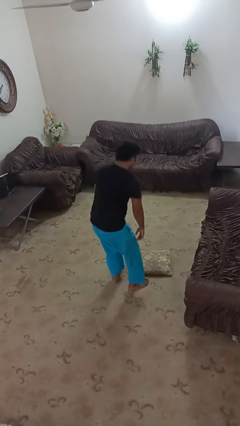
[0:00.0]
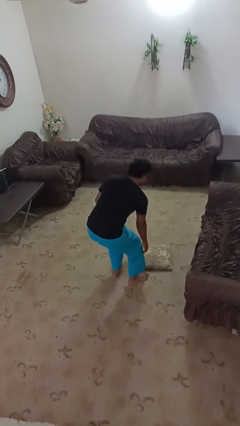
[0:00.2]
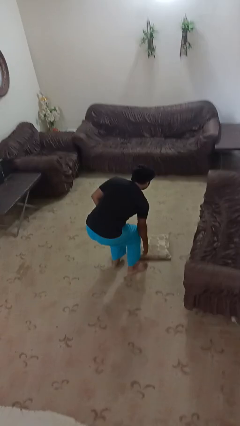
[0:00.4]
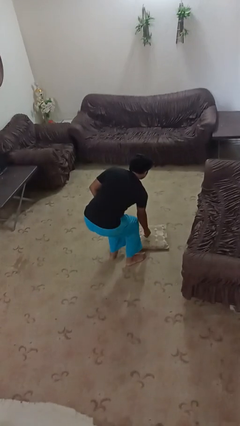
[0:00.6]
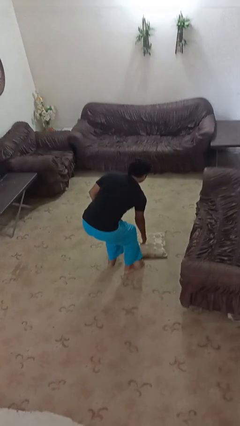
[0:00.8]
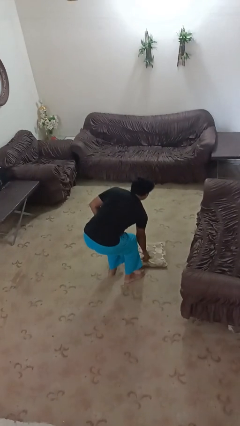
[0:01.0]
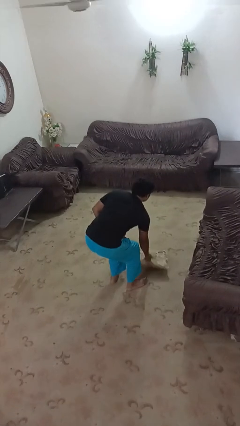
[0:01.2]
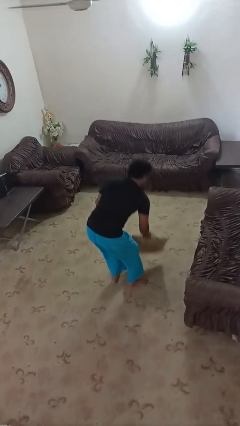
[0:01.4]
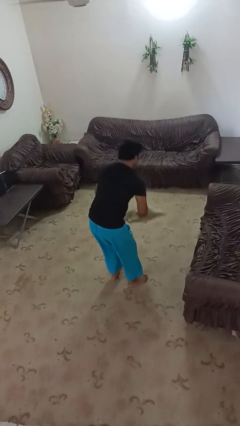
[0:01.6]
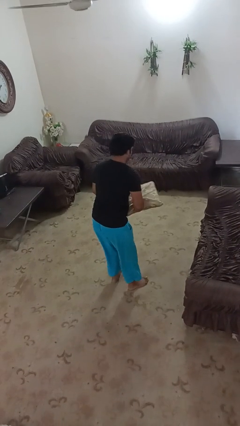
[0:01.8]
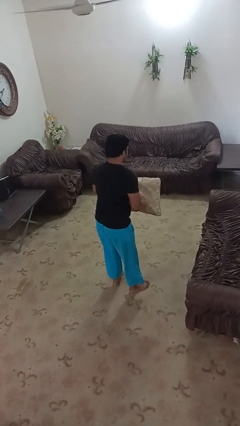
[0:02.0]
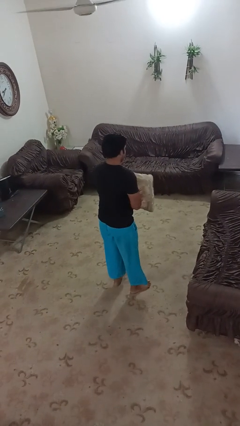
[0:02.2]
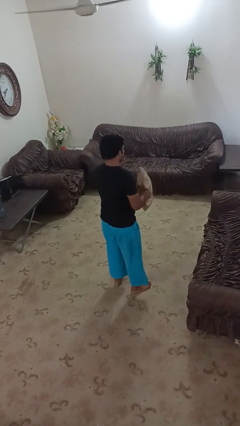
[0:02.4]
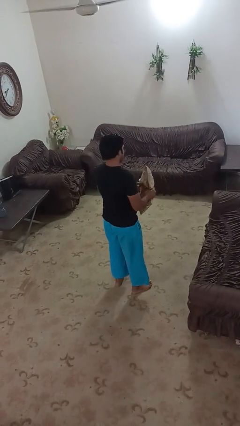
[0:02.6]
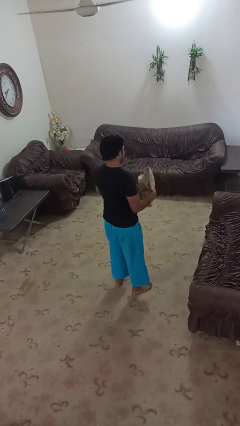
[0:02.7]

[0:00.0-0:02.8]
person picks up object from floor

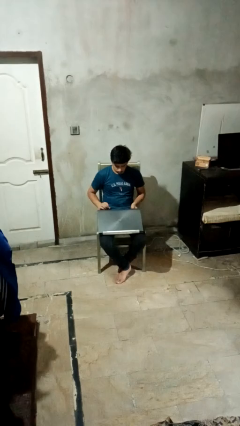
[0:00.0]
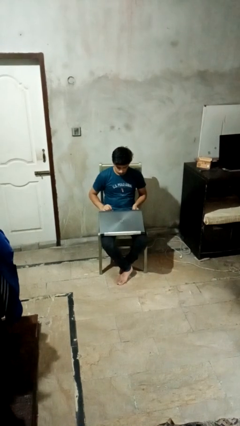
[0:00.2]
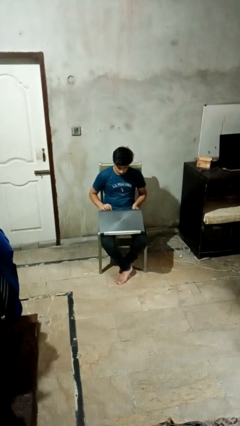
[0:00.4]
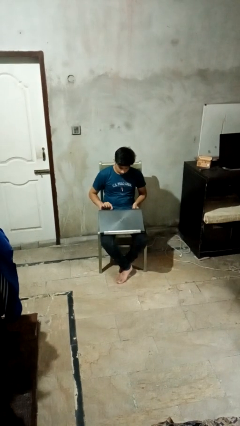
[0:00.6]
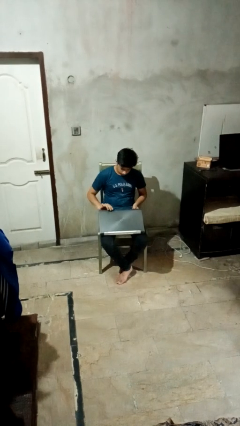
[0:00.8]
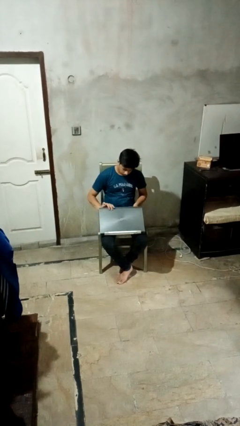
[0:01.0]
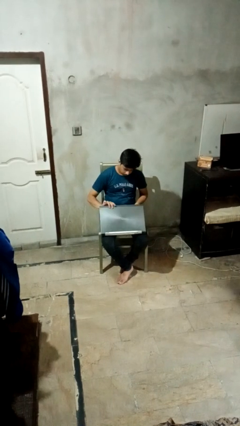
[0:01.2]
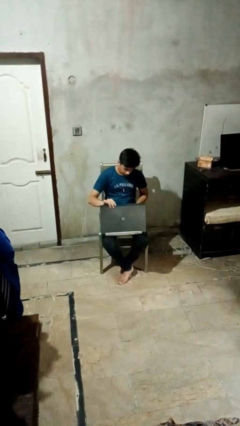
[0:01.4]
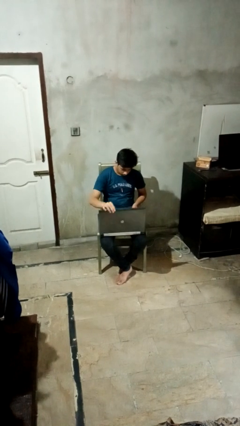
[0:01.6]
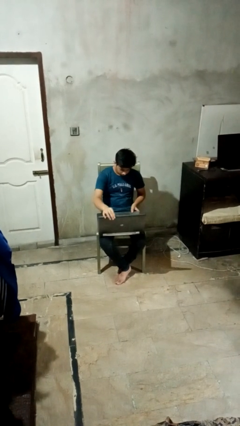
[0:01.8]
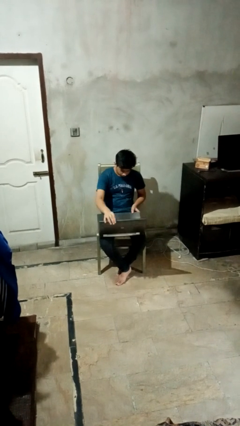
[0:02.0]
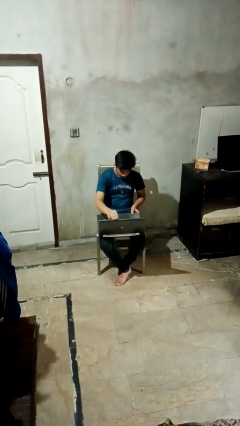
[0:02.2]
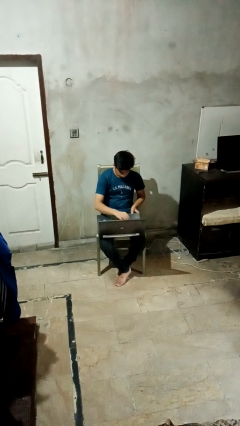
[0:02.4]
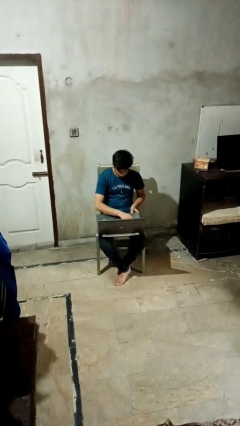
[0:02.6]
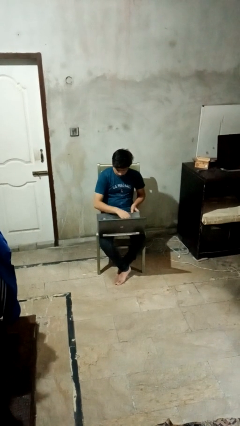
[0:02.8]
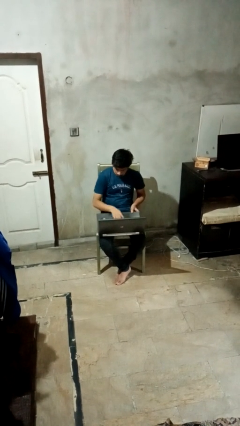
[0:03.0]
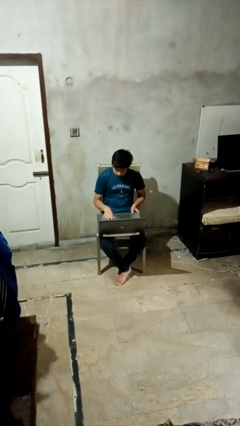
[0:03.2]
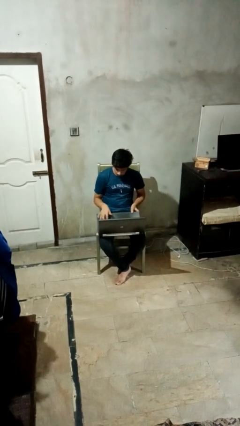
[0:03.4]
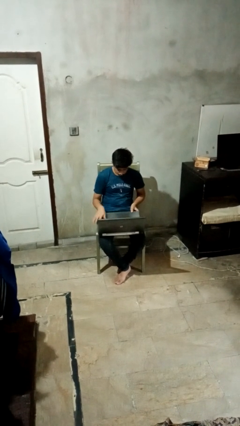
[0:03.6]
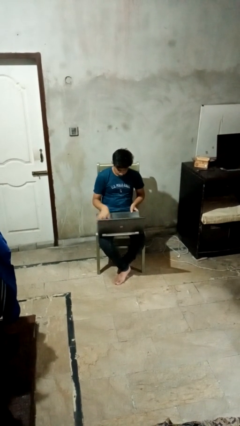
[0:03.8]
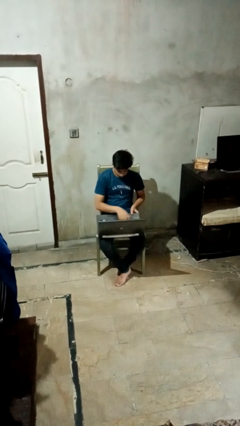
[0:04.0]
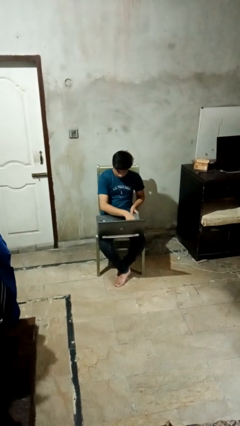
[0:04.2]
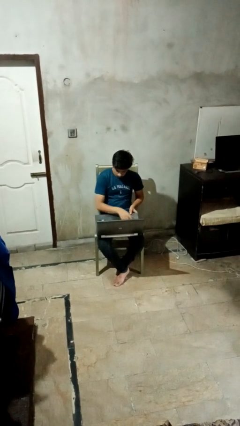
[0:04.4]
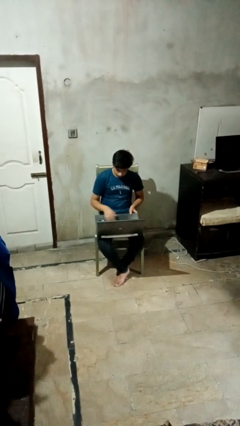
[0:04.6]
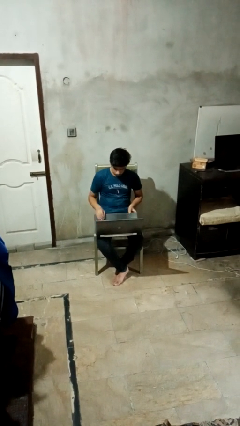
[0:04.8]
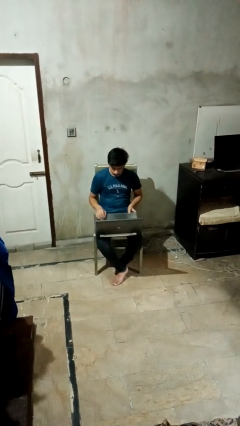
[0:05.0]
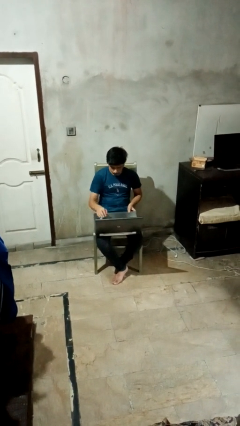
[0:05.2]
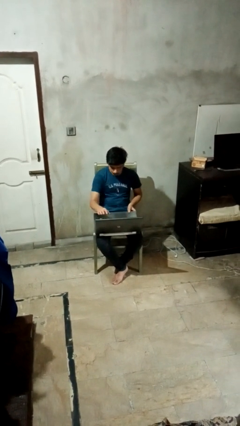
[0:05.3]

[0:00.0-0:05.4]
person opens laptop

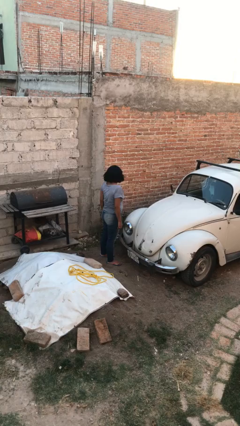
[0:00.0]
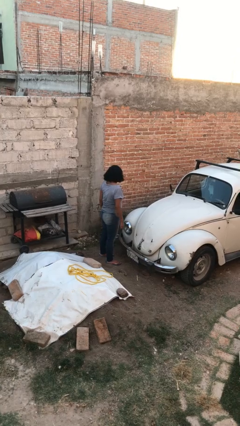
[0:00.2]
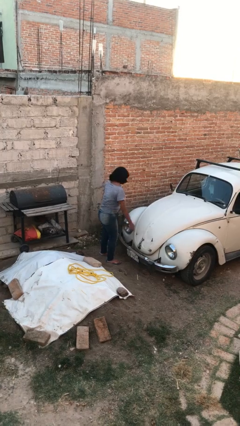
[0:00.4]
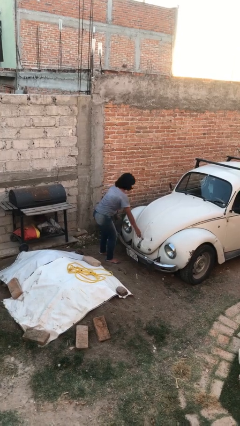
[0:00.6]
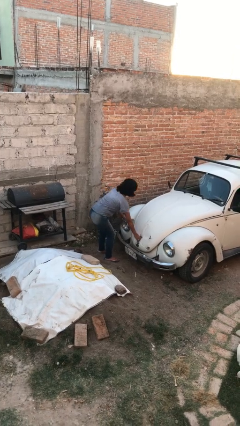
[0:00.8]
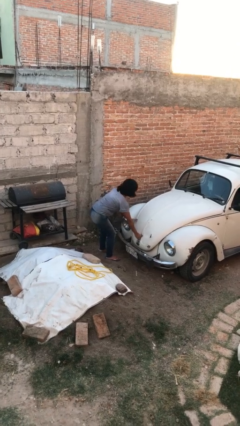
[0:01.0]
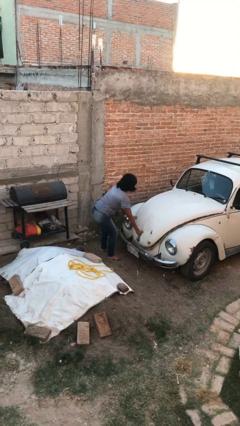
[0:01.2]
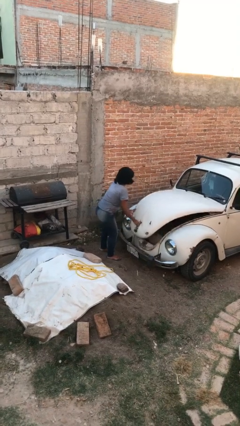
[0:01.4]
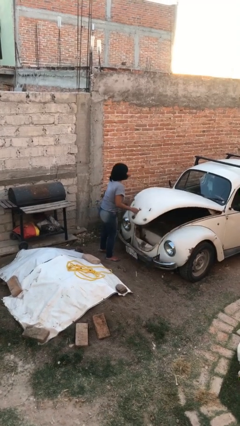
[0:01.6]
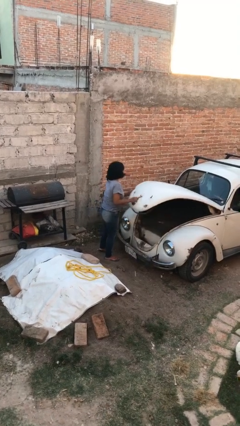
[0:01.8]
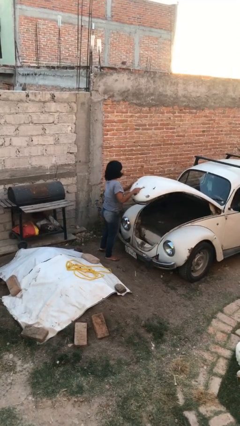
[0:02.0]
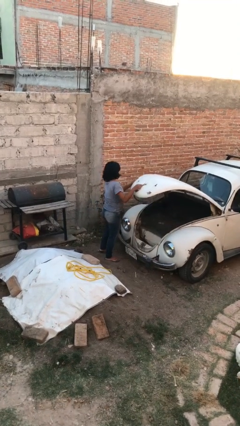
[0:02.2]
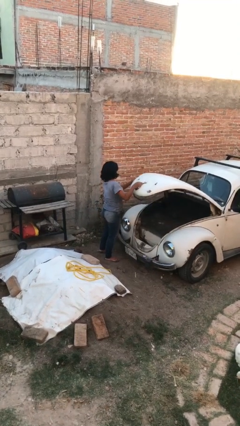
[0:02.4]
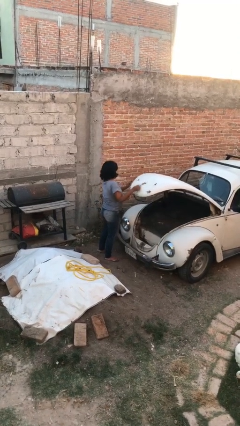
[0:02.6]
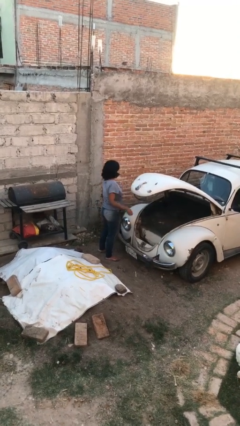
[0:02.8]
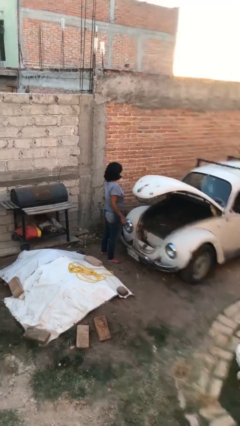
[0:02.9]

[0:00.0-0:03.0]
person opens car trunk

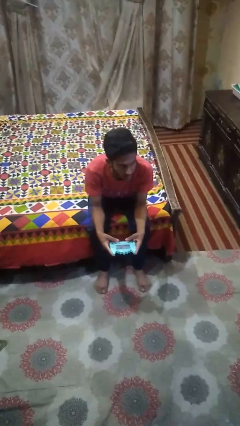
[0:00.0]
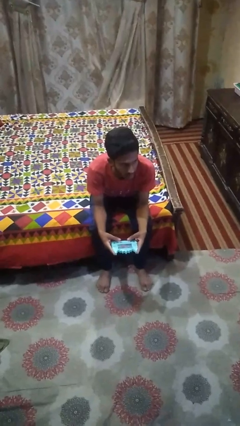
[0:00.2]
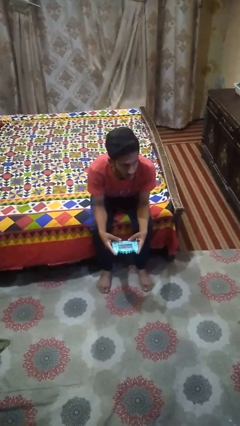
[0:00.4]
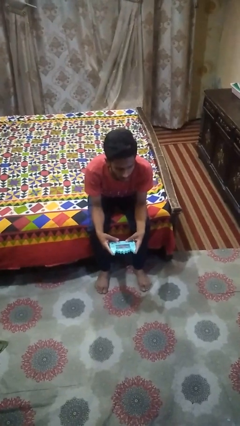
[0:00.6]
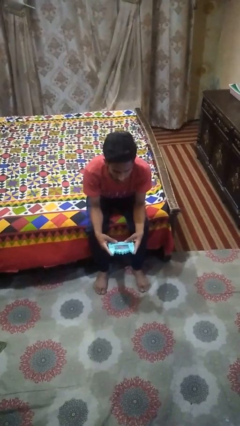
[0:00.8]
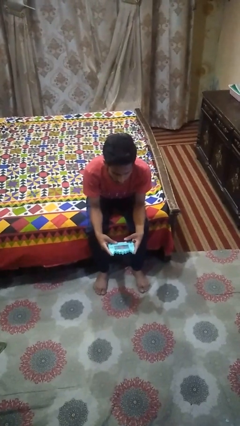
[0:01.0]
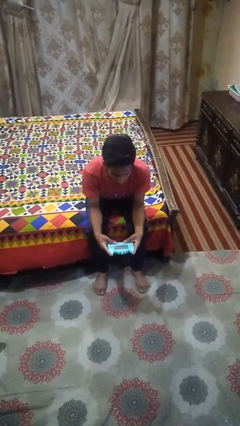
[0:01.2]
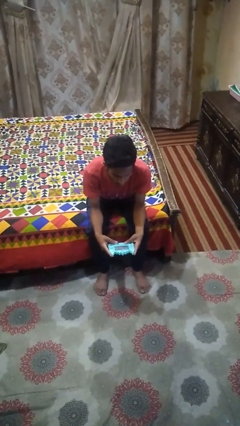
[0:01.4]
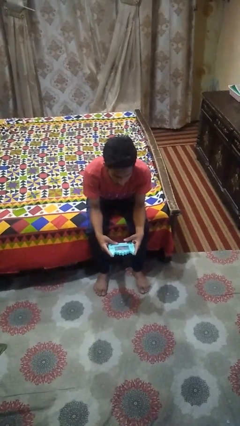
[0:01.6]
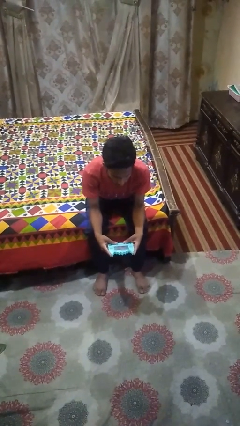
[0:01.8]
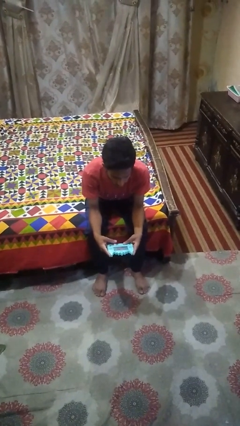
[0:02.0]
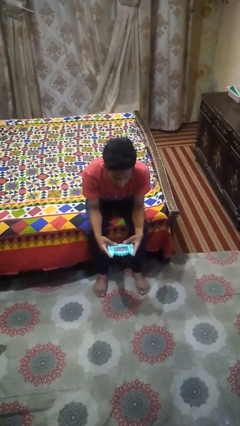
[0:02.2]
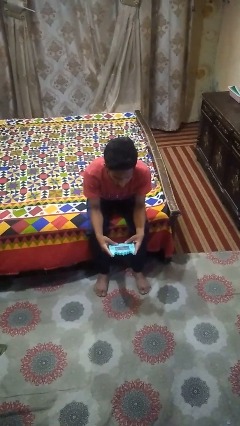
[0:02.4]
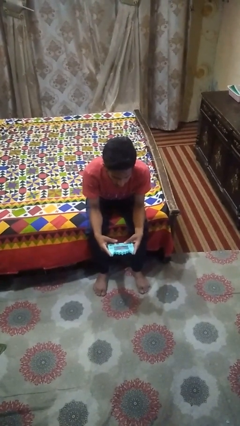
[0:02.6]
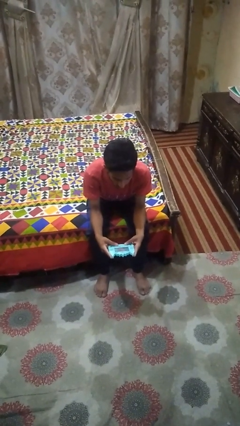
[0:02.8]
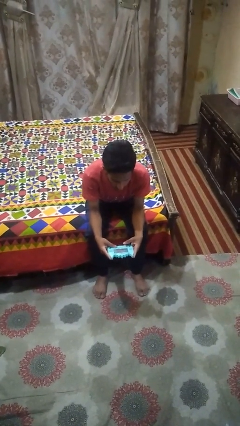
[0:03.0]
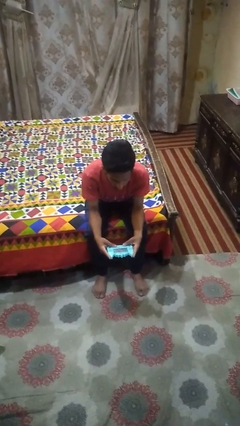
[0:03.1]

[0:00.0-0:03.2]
person interacts with handheld game

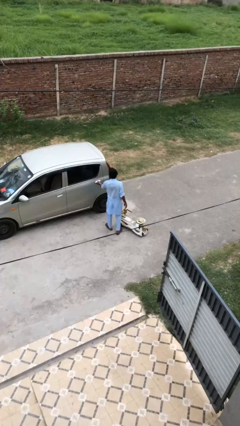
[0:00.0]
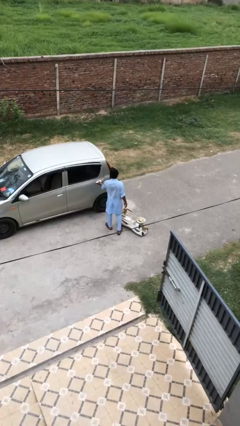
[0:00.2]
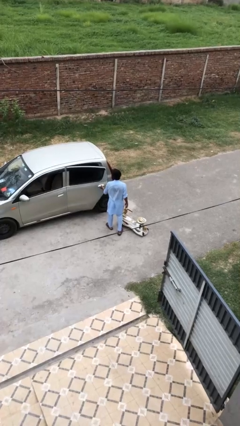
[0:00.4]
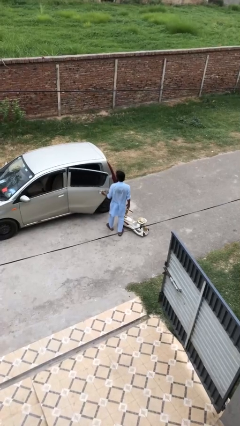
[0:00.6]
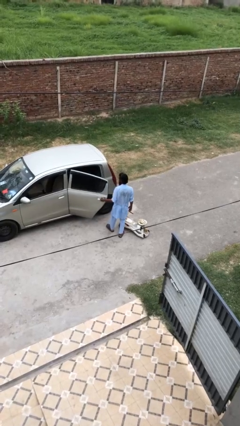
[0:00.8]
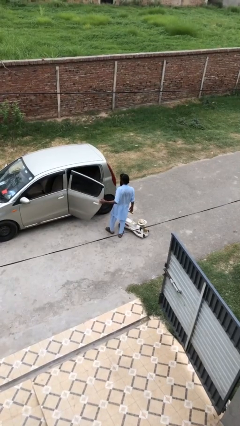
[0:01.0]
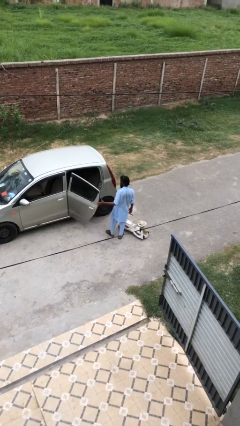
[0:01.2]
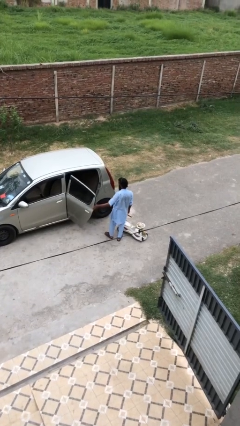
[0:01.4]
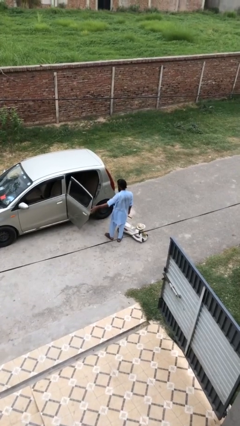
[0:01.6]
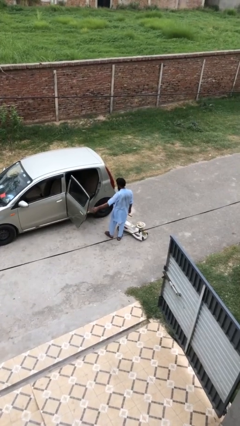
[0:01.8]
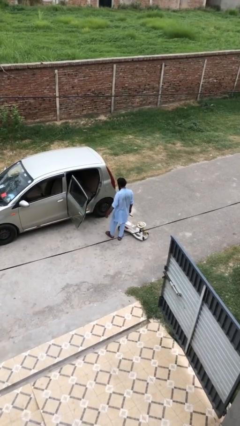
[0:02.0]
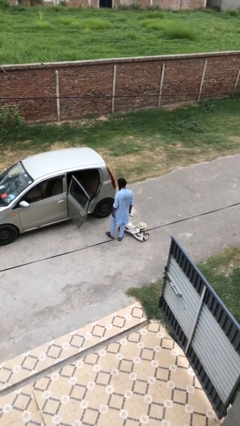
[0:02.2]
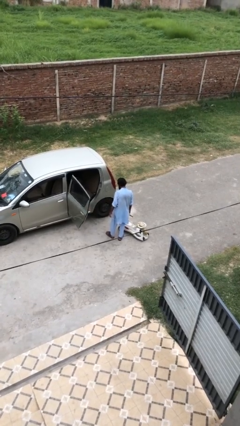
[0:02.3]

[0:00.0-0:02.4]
person opens car door

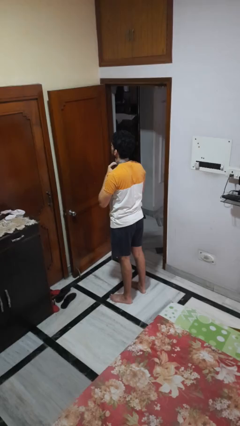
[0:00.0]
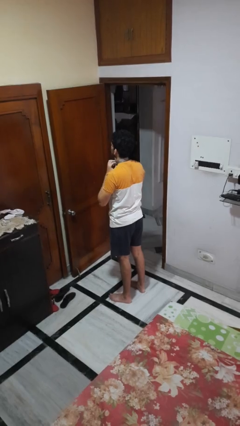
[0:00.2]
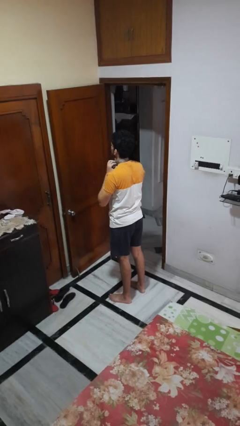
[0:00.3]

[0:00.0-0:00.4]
person takes off necktie

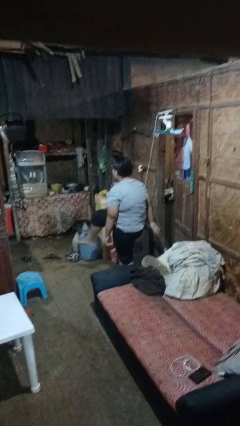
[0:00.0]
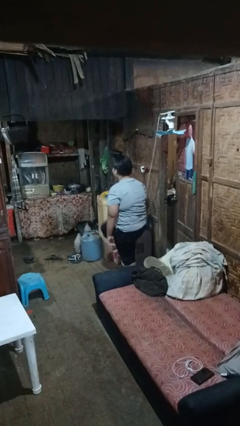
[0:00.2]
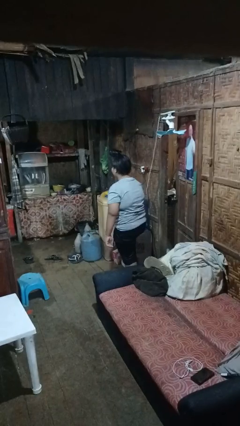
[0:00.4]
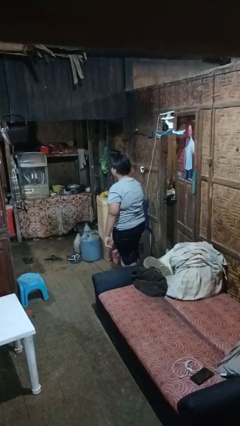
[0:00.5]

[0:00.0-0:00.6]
person karate kicks
